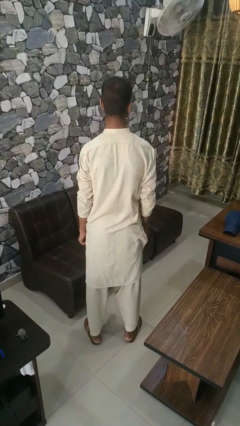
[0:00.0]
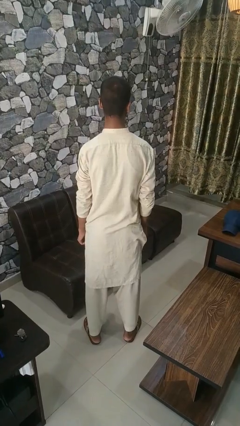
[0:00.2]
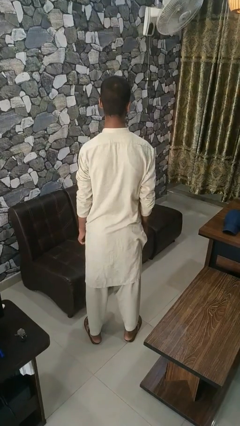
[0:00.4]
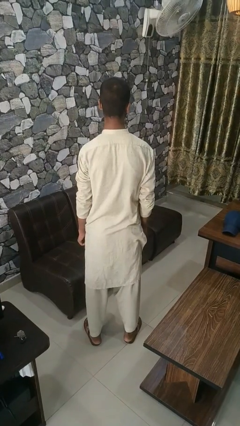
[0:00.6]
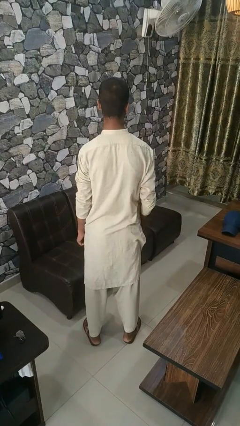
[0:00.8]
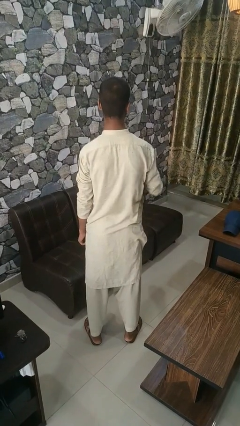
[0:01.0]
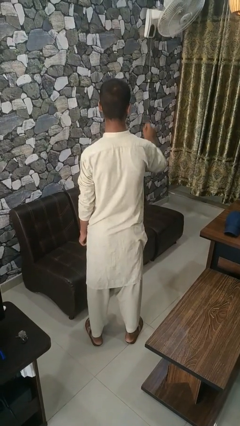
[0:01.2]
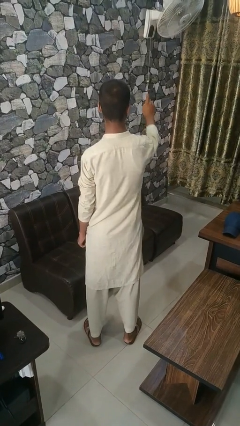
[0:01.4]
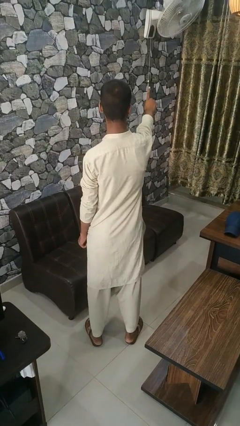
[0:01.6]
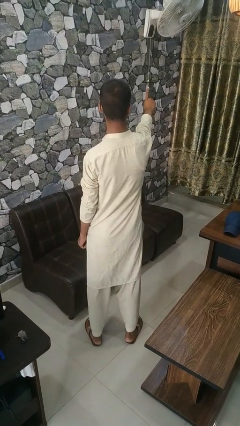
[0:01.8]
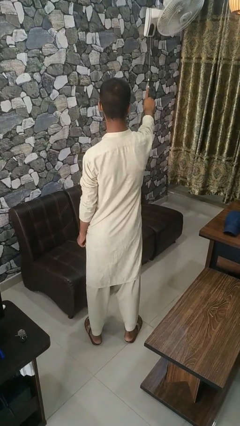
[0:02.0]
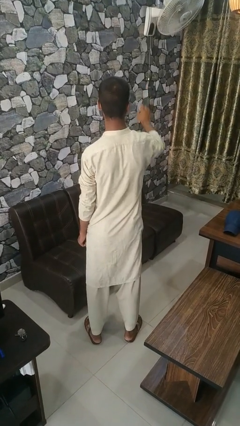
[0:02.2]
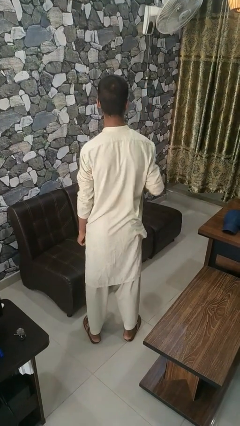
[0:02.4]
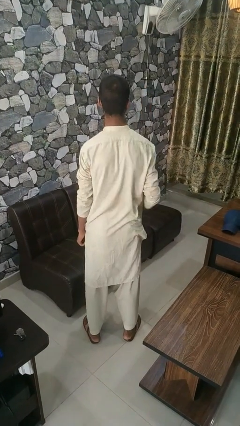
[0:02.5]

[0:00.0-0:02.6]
person gestures number one

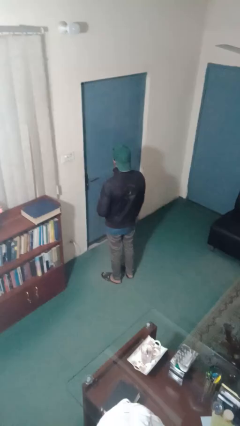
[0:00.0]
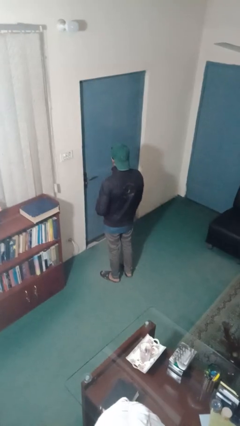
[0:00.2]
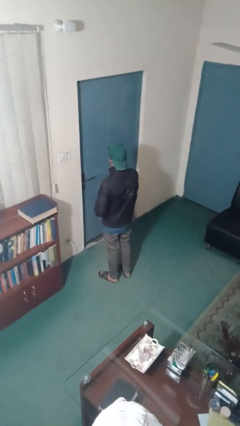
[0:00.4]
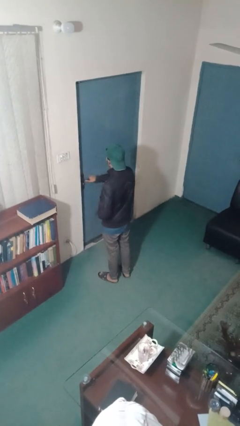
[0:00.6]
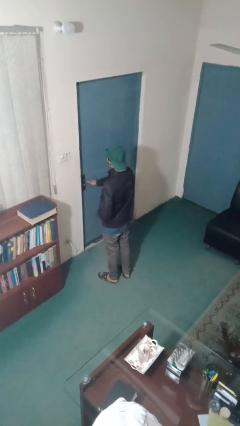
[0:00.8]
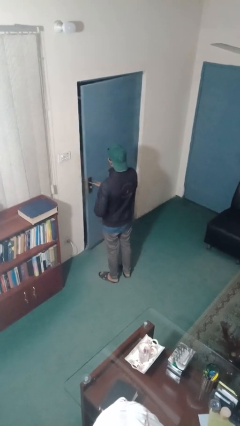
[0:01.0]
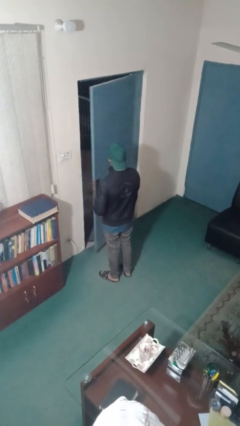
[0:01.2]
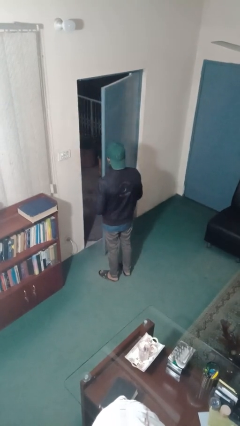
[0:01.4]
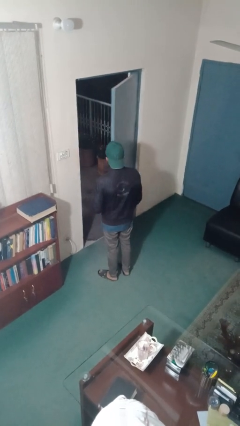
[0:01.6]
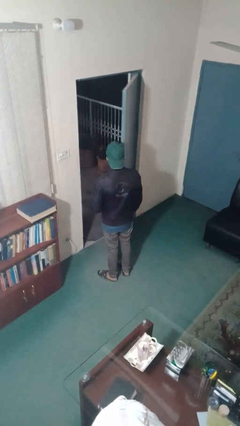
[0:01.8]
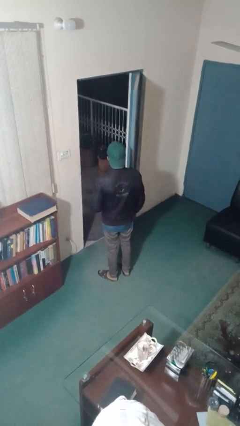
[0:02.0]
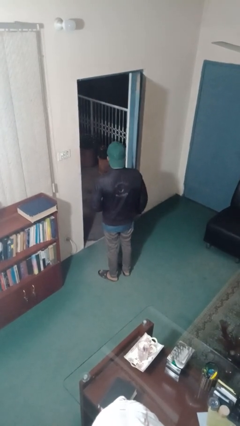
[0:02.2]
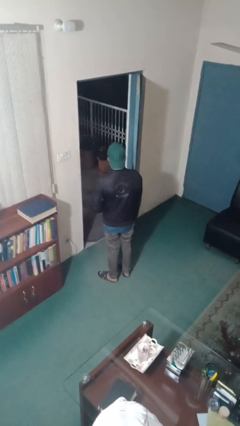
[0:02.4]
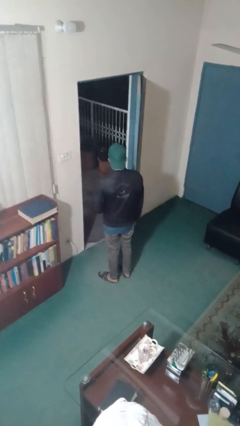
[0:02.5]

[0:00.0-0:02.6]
person opens facility door

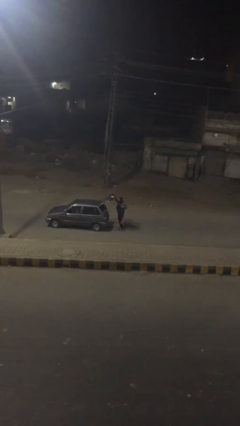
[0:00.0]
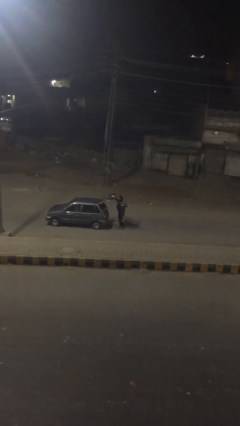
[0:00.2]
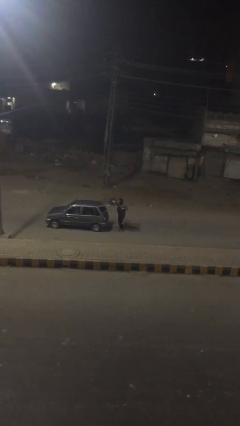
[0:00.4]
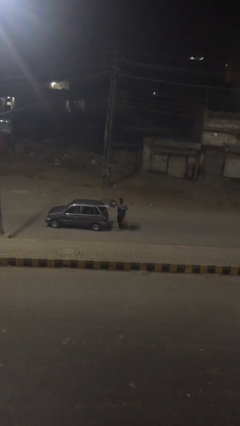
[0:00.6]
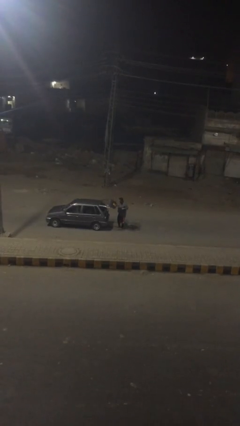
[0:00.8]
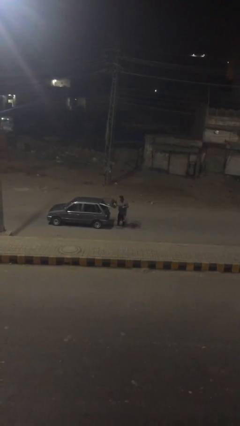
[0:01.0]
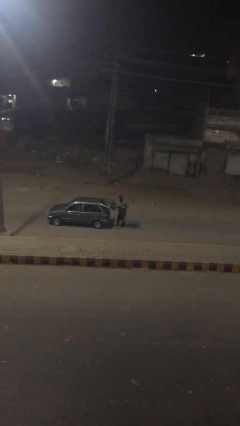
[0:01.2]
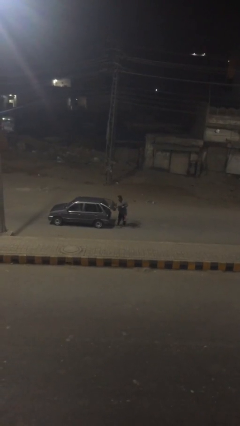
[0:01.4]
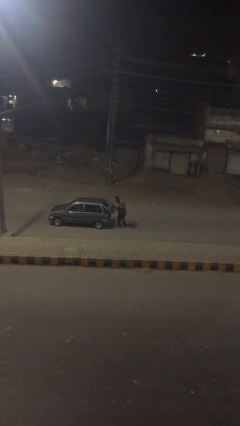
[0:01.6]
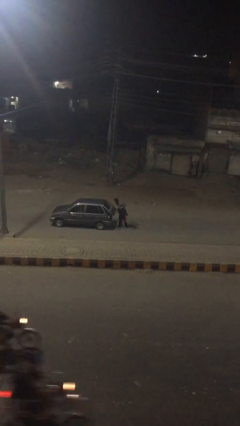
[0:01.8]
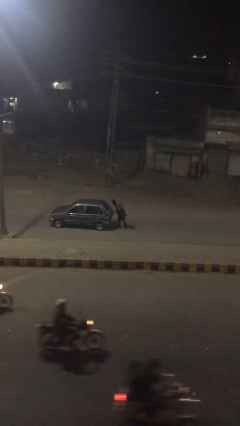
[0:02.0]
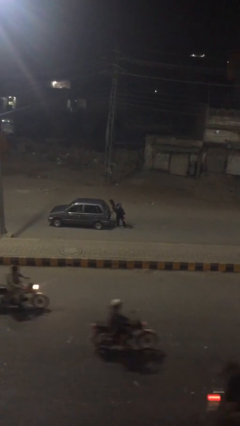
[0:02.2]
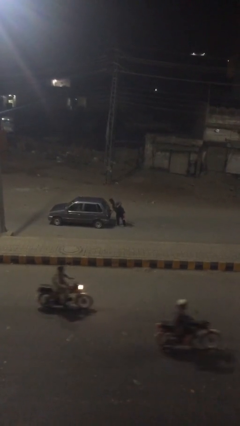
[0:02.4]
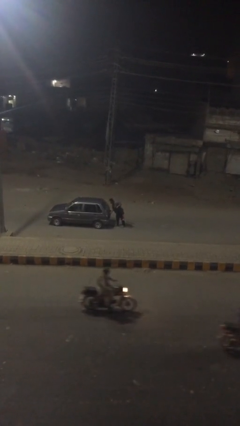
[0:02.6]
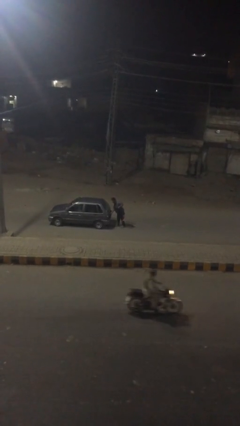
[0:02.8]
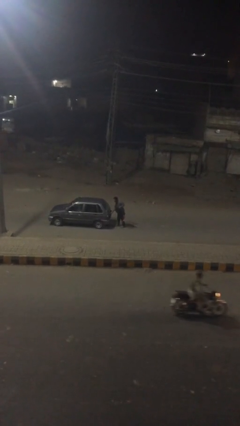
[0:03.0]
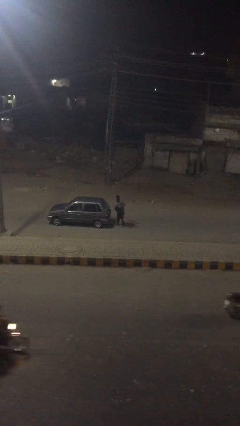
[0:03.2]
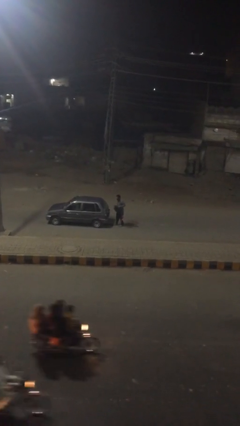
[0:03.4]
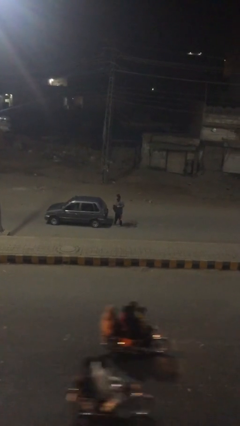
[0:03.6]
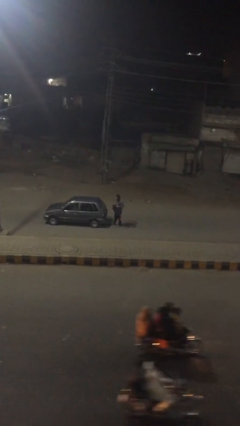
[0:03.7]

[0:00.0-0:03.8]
person closes car trunk

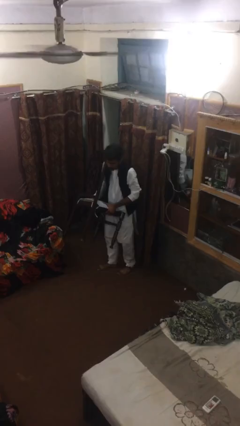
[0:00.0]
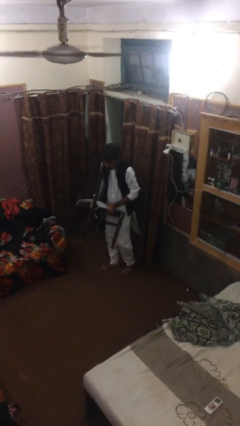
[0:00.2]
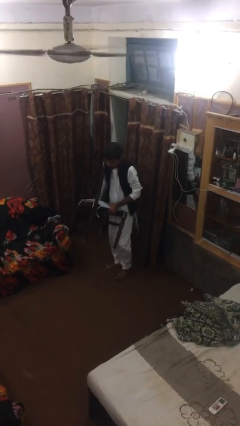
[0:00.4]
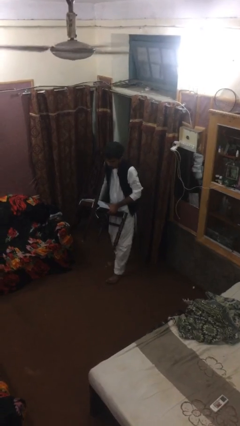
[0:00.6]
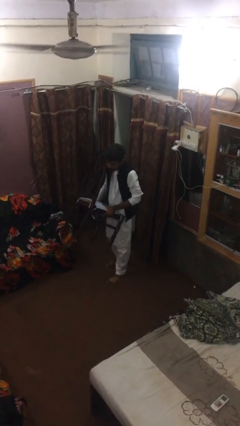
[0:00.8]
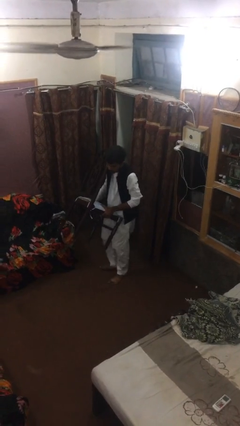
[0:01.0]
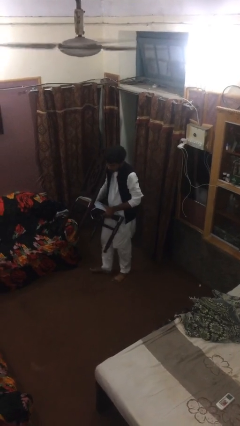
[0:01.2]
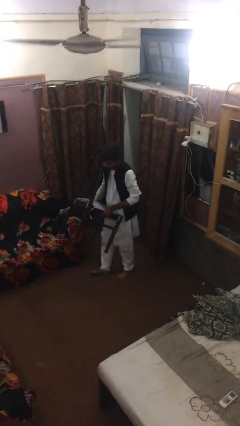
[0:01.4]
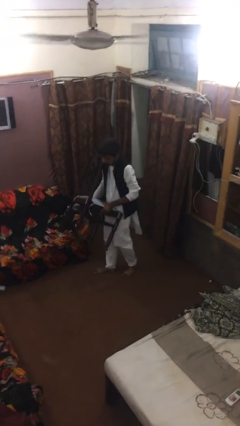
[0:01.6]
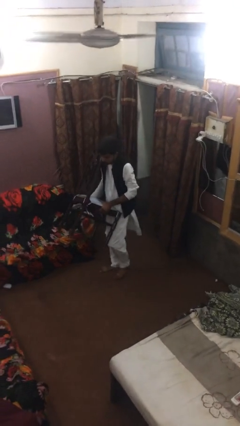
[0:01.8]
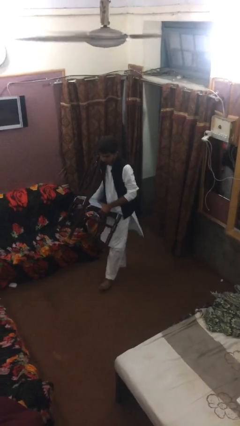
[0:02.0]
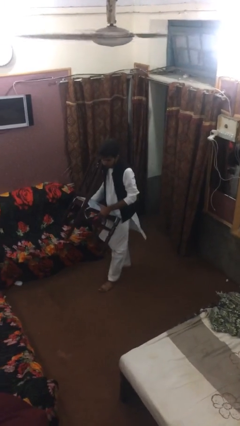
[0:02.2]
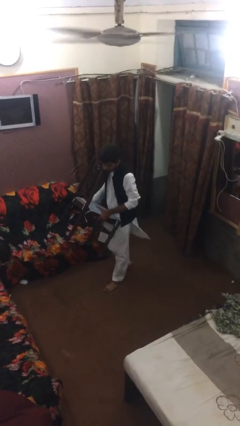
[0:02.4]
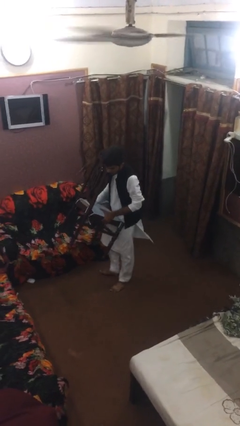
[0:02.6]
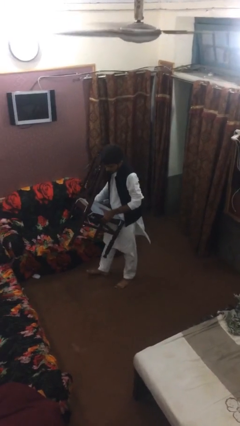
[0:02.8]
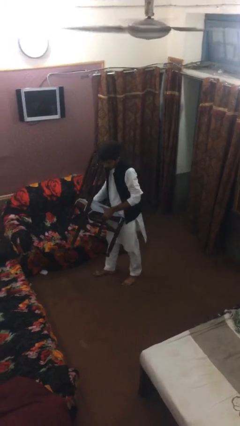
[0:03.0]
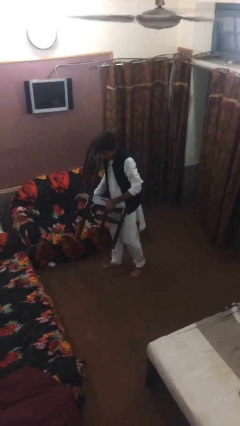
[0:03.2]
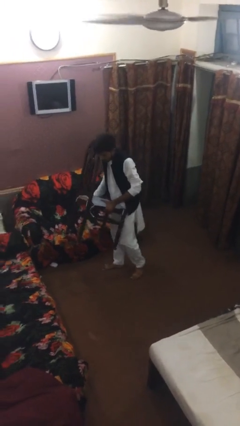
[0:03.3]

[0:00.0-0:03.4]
person carries heavy object

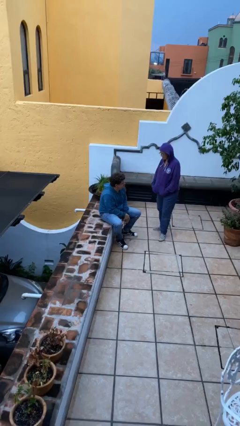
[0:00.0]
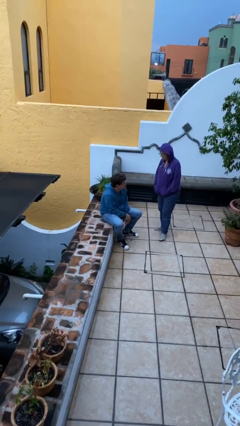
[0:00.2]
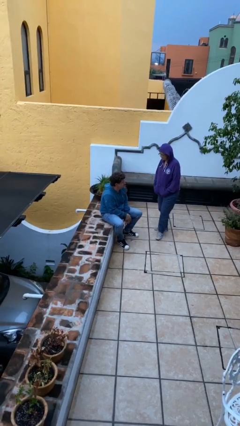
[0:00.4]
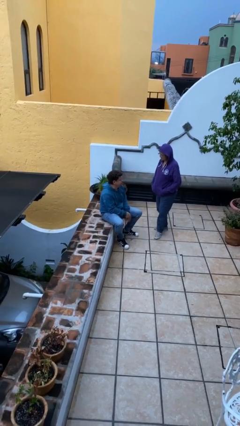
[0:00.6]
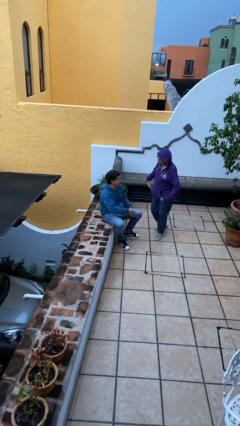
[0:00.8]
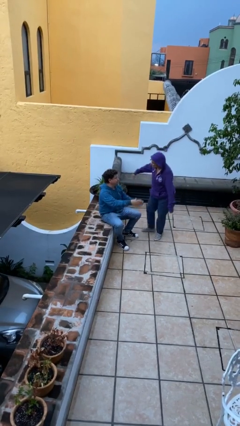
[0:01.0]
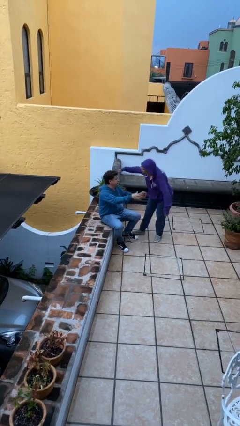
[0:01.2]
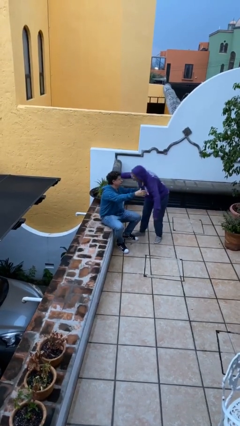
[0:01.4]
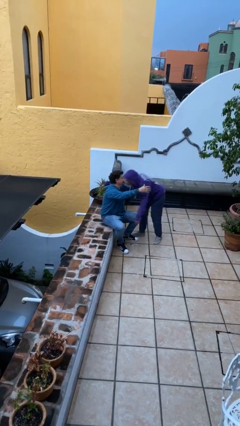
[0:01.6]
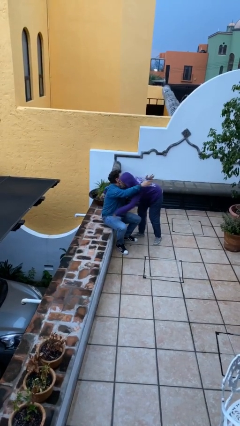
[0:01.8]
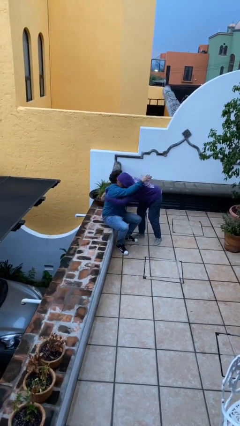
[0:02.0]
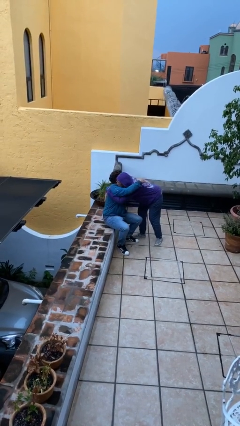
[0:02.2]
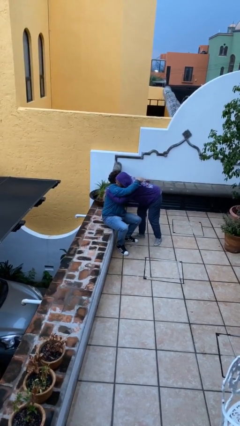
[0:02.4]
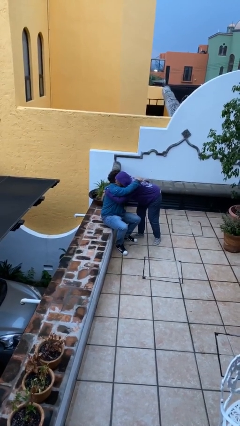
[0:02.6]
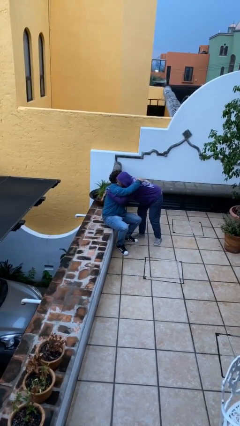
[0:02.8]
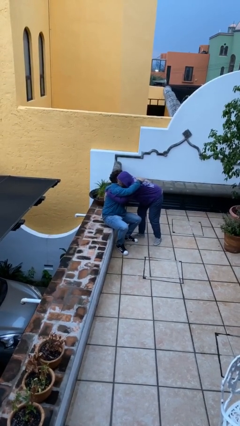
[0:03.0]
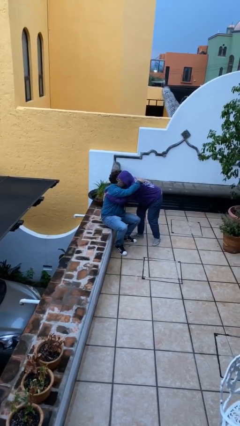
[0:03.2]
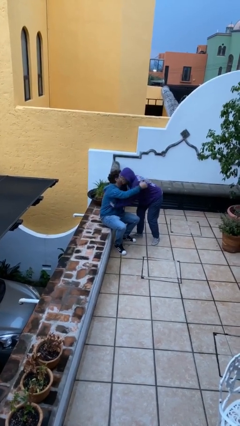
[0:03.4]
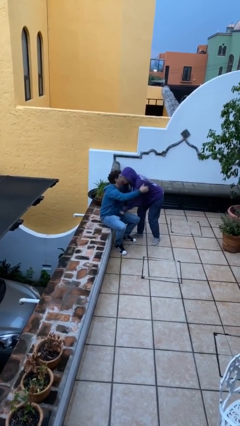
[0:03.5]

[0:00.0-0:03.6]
person embraces person

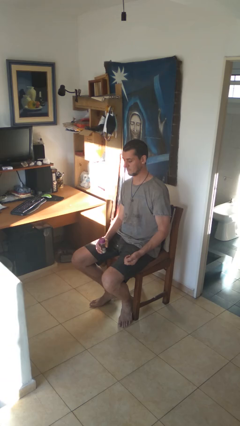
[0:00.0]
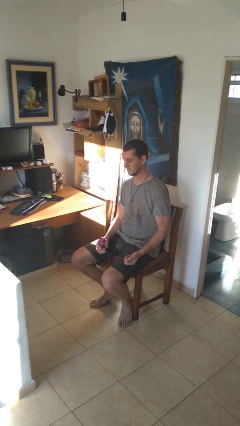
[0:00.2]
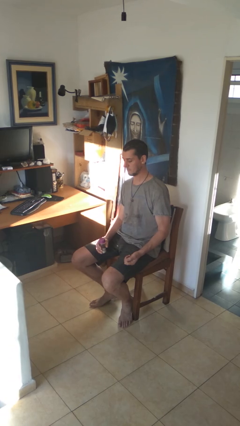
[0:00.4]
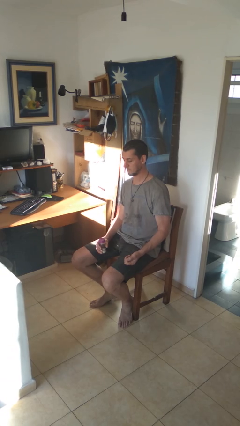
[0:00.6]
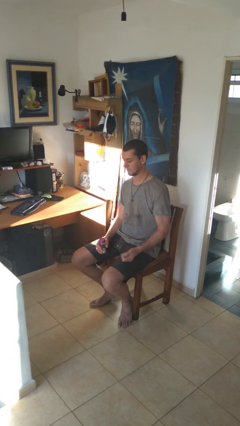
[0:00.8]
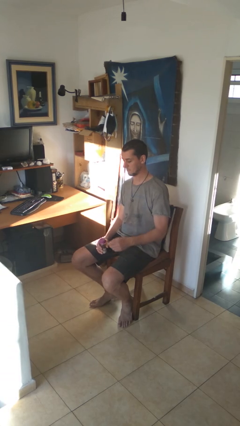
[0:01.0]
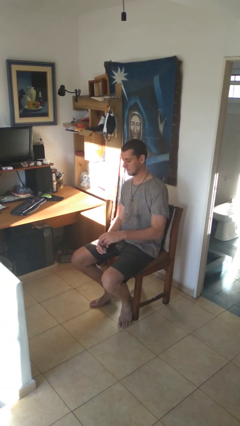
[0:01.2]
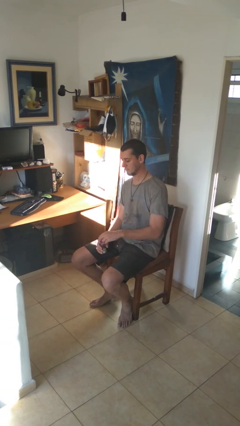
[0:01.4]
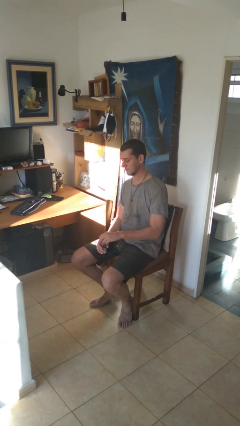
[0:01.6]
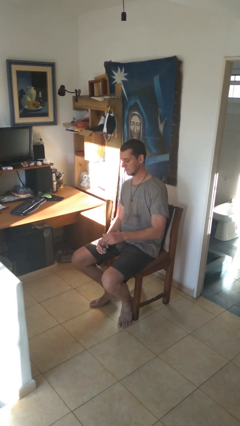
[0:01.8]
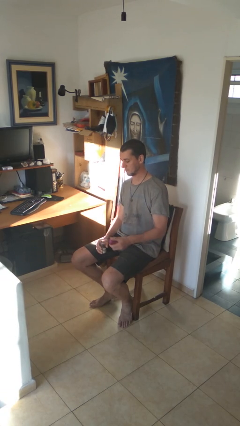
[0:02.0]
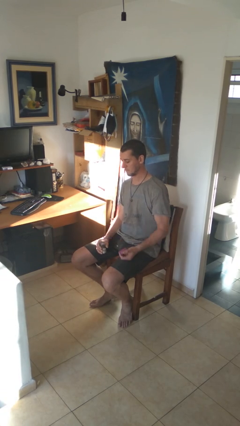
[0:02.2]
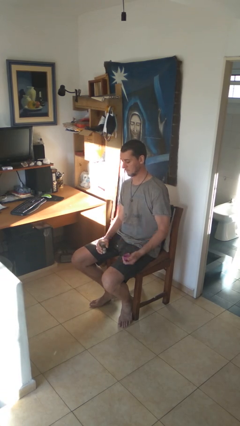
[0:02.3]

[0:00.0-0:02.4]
person opens jar
